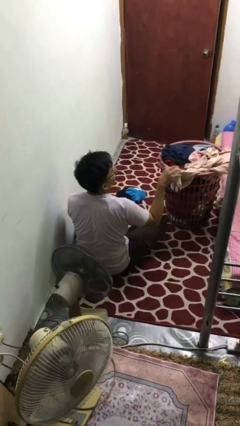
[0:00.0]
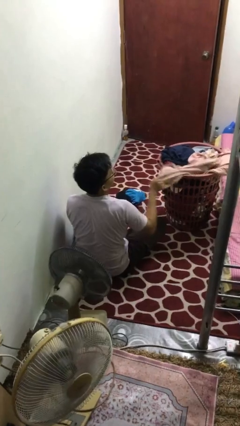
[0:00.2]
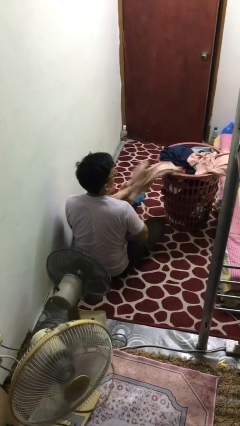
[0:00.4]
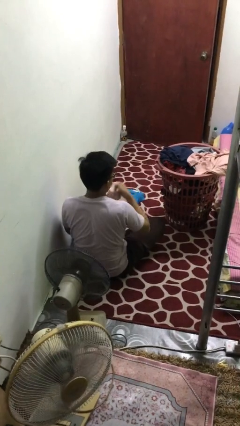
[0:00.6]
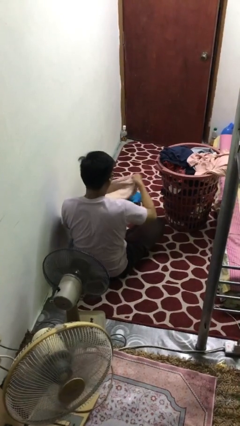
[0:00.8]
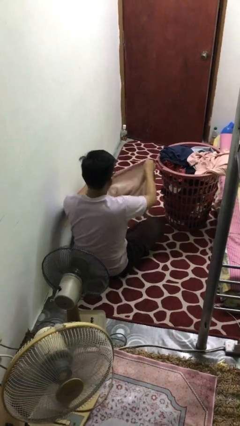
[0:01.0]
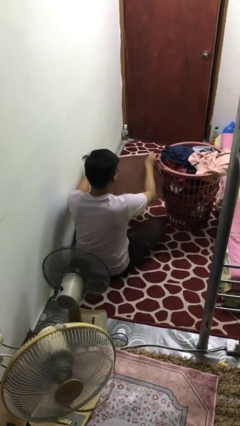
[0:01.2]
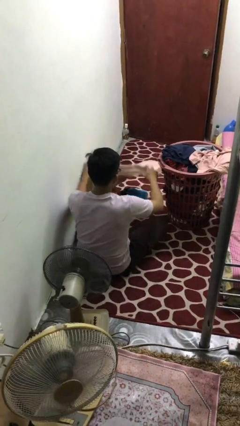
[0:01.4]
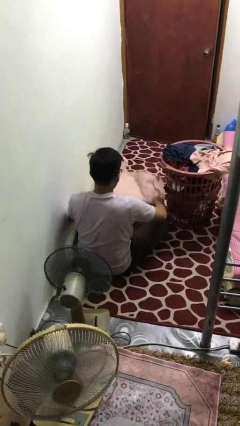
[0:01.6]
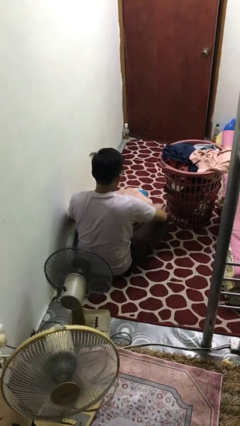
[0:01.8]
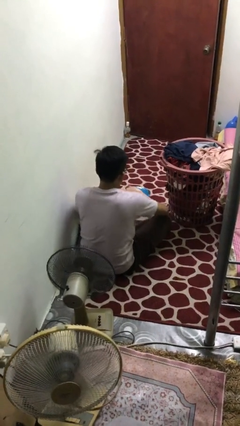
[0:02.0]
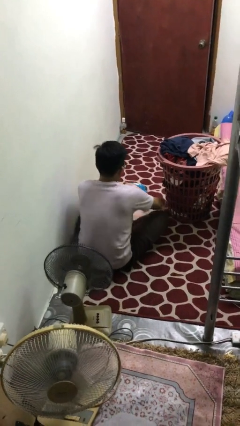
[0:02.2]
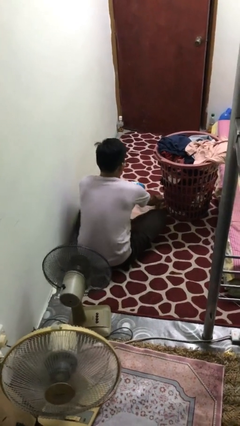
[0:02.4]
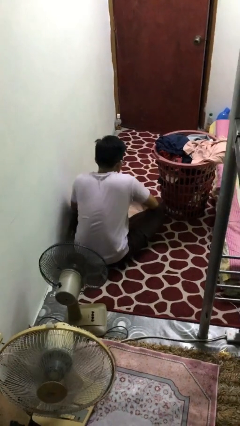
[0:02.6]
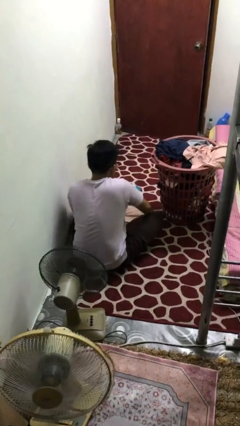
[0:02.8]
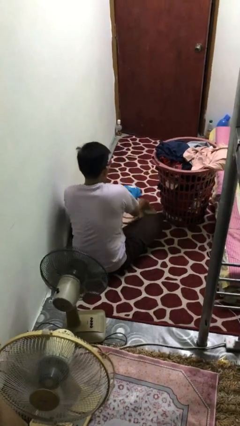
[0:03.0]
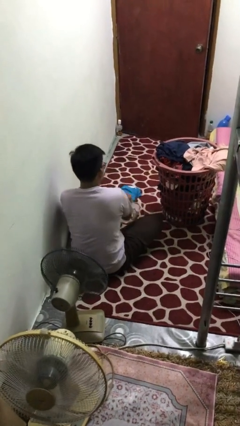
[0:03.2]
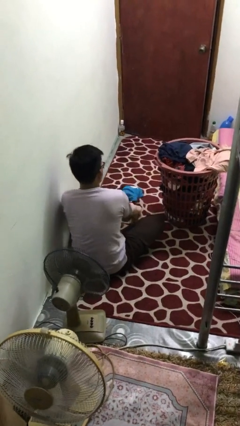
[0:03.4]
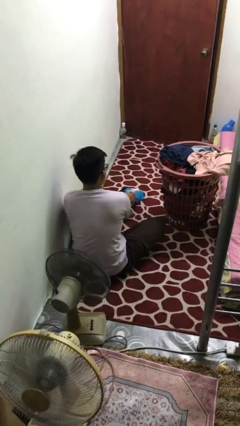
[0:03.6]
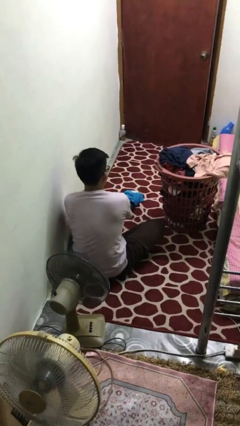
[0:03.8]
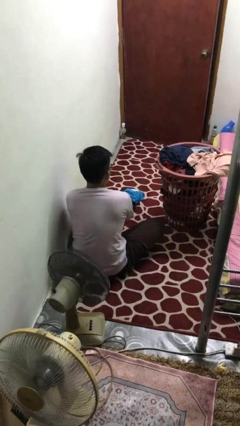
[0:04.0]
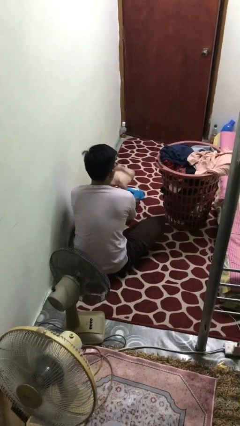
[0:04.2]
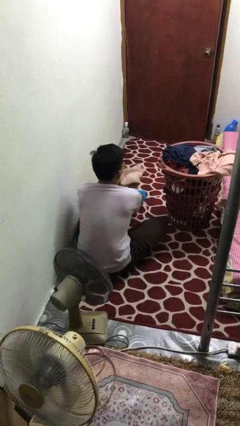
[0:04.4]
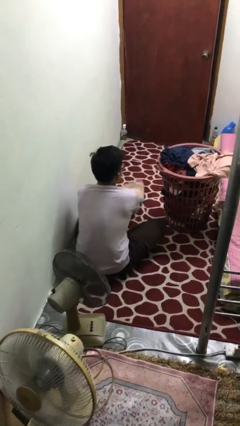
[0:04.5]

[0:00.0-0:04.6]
person folds shirt

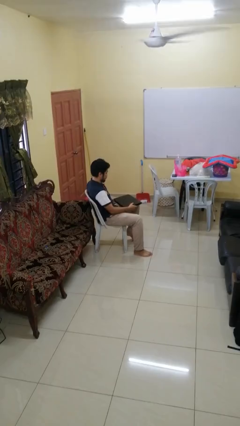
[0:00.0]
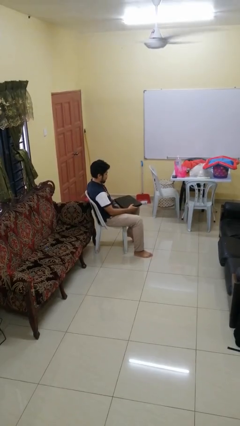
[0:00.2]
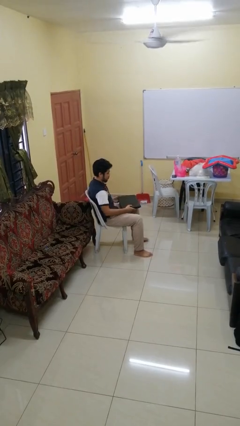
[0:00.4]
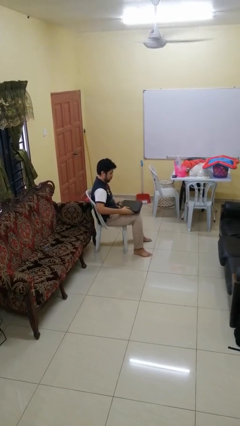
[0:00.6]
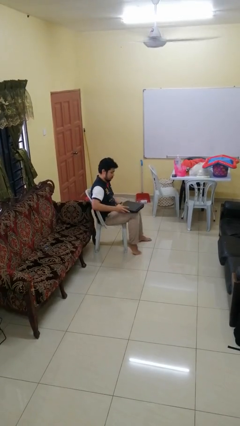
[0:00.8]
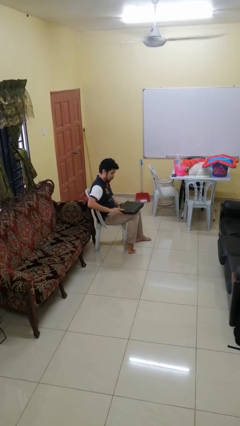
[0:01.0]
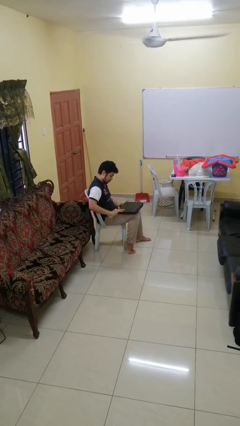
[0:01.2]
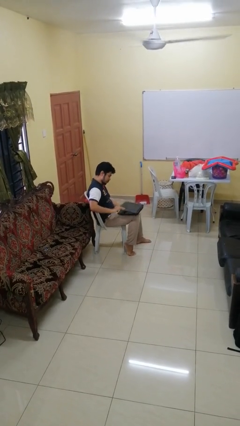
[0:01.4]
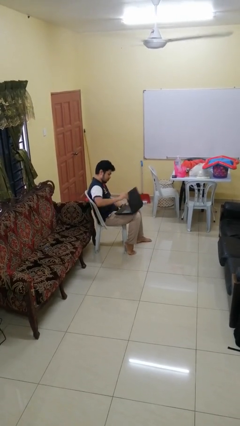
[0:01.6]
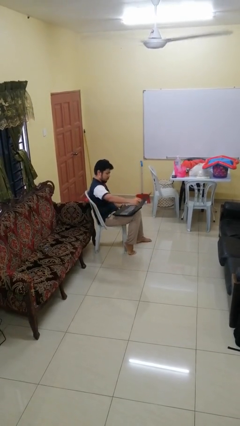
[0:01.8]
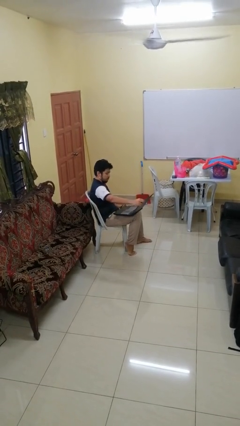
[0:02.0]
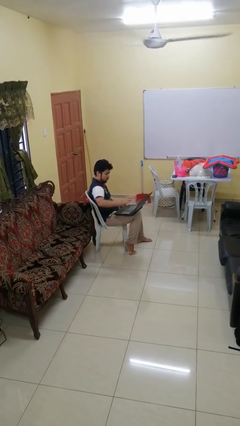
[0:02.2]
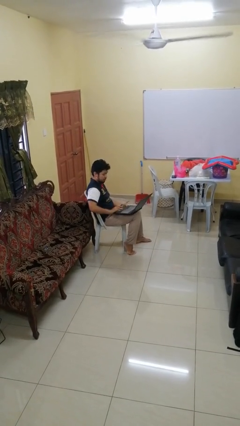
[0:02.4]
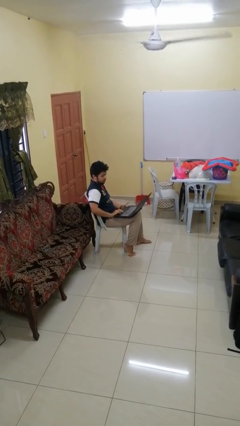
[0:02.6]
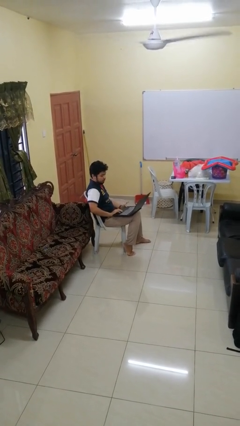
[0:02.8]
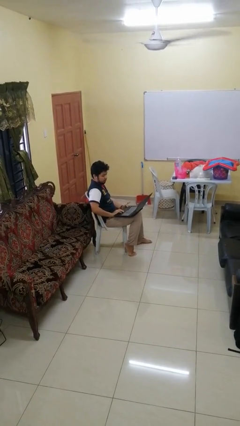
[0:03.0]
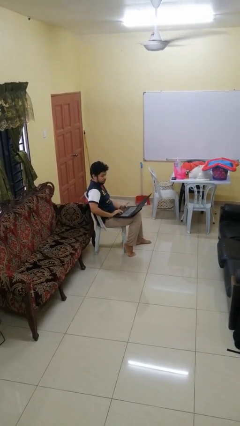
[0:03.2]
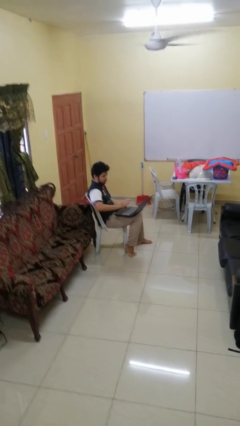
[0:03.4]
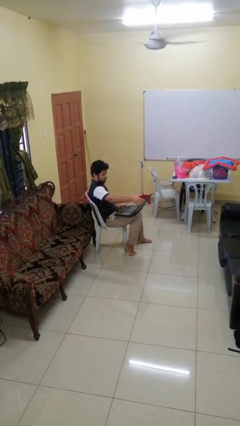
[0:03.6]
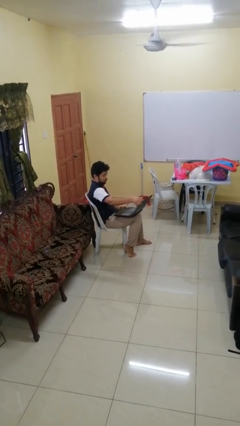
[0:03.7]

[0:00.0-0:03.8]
person opens laptop

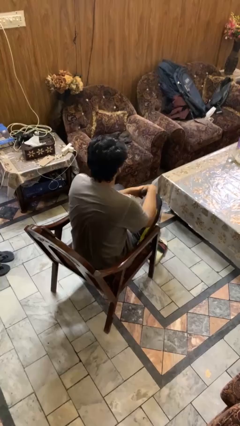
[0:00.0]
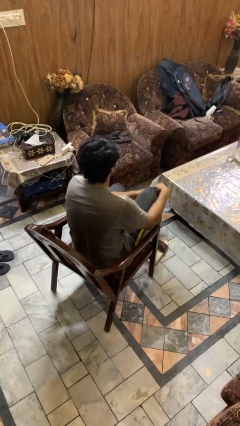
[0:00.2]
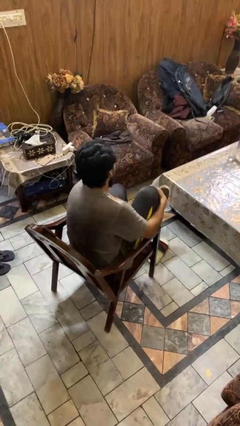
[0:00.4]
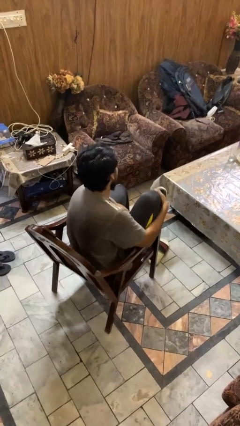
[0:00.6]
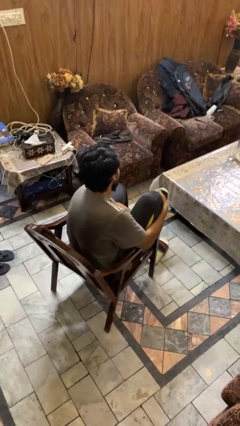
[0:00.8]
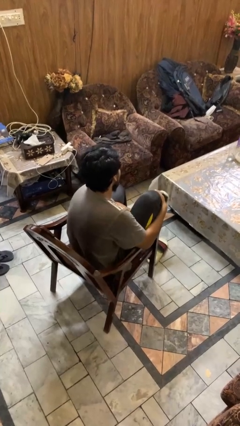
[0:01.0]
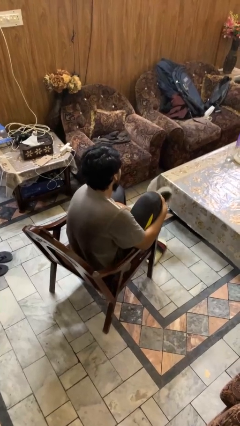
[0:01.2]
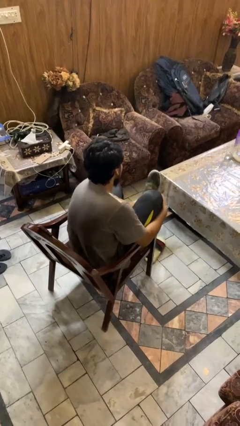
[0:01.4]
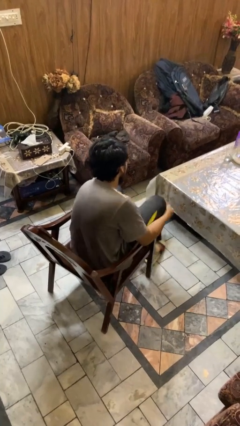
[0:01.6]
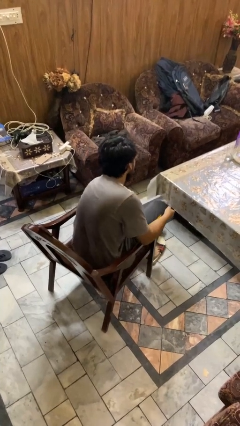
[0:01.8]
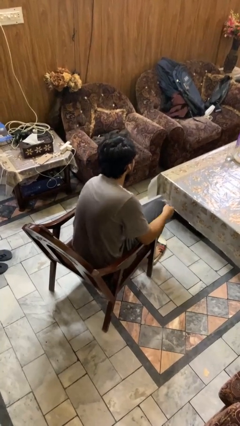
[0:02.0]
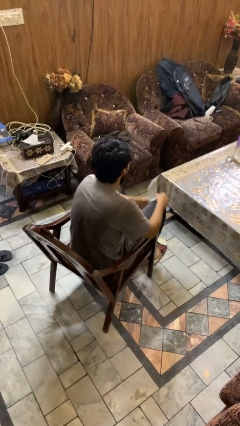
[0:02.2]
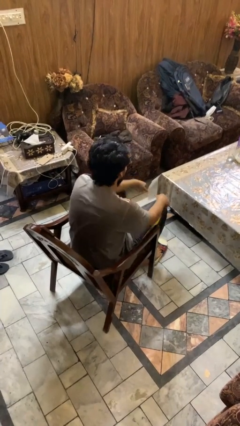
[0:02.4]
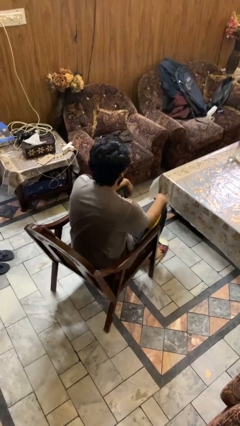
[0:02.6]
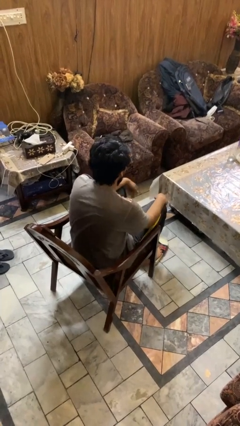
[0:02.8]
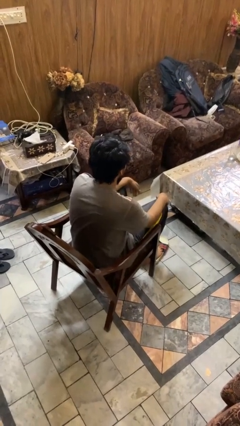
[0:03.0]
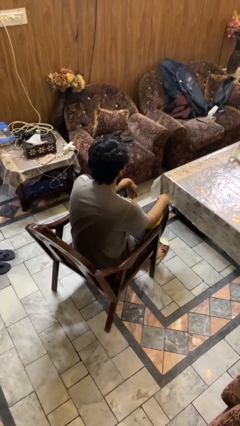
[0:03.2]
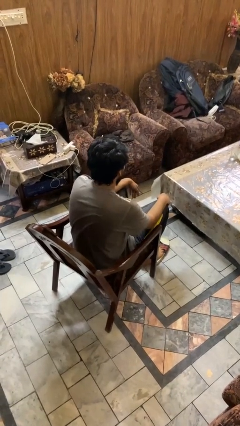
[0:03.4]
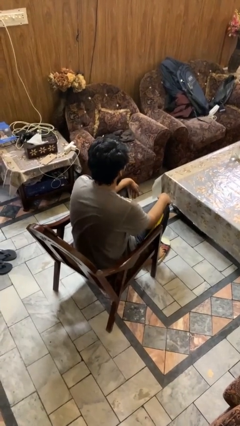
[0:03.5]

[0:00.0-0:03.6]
person takes off shoes

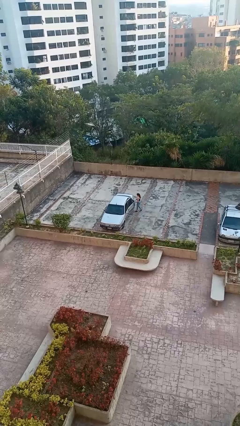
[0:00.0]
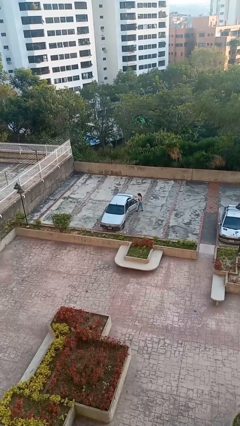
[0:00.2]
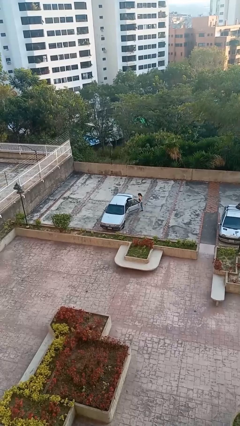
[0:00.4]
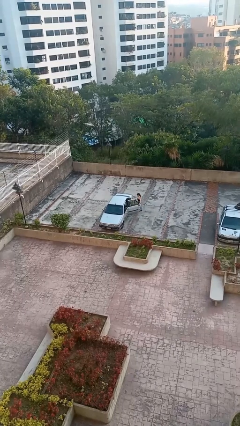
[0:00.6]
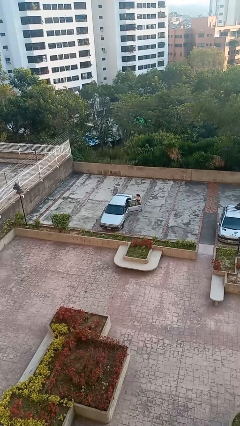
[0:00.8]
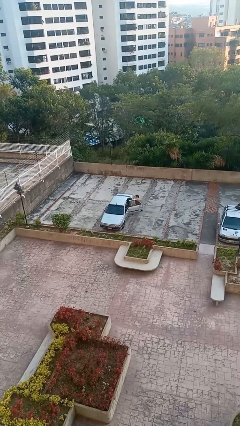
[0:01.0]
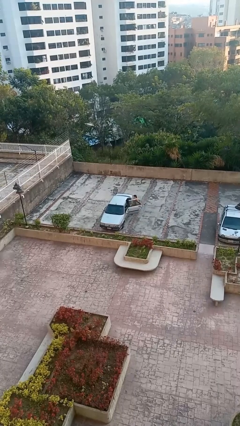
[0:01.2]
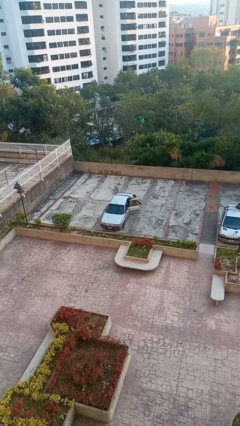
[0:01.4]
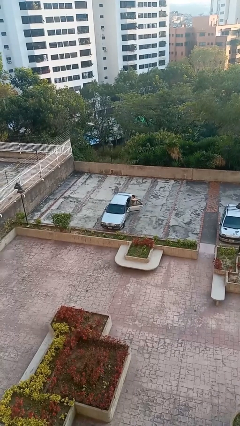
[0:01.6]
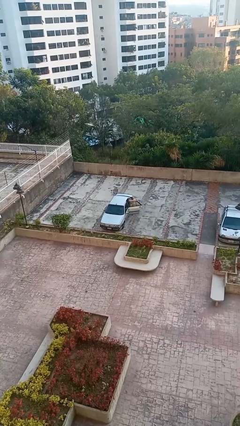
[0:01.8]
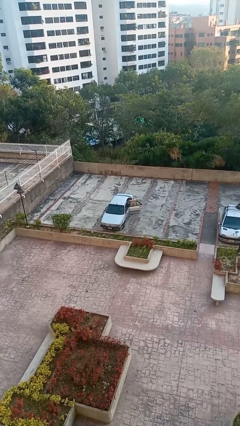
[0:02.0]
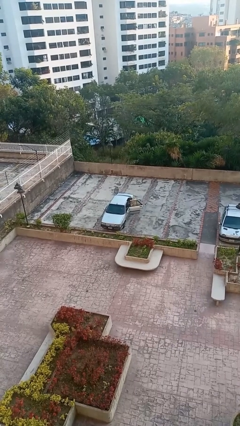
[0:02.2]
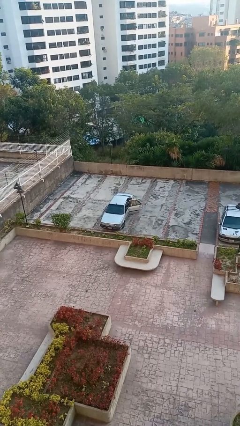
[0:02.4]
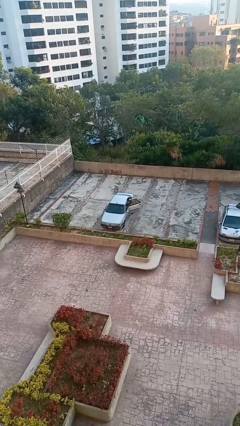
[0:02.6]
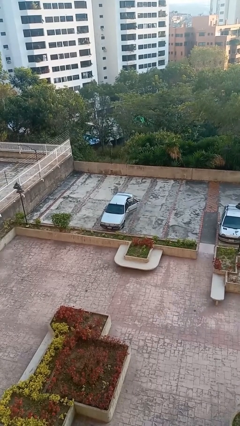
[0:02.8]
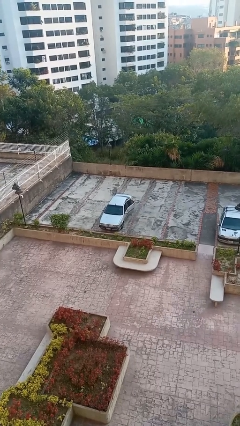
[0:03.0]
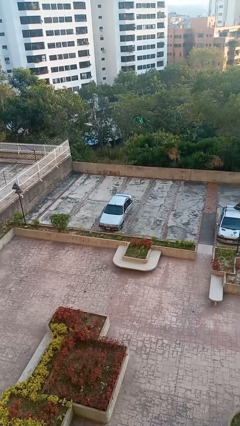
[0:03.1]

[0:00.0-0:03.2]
car picks up person

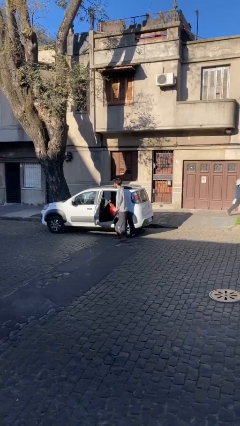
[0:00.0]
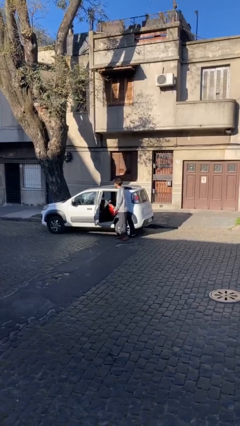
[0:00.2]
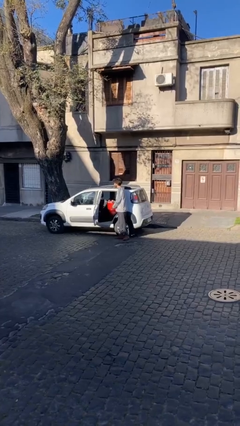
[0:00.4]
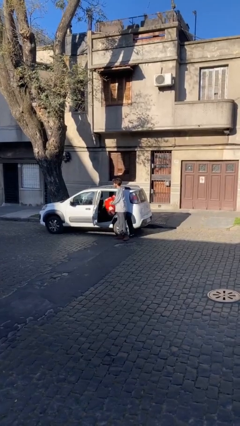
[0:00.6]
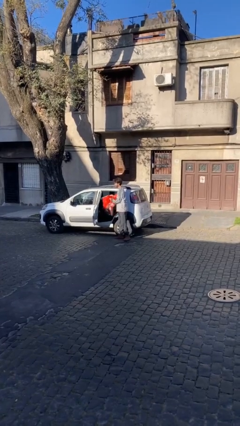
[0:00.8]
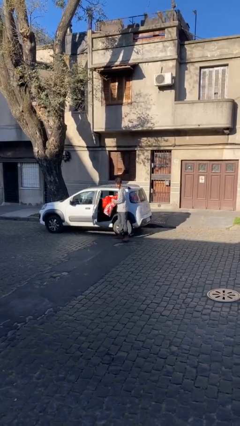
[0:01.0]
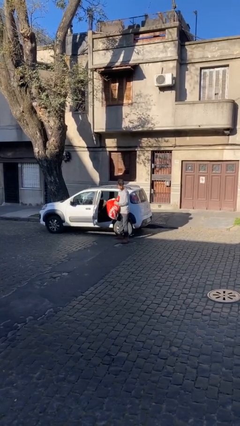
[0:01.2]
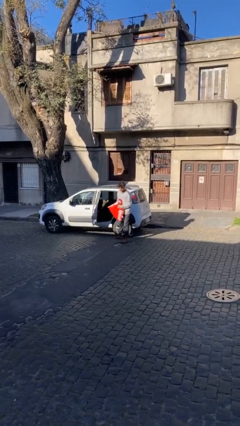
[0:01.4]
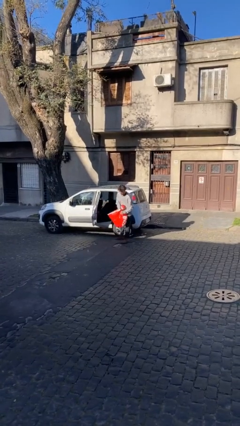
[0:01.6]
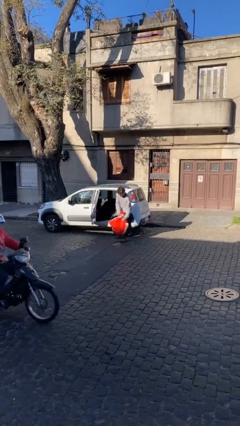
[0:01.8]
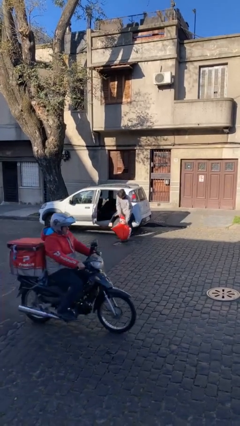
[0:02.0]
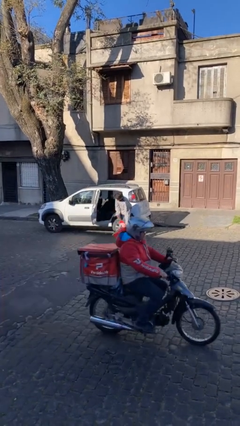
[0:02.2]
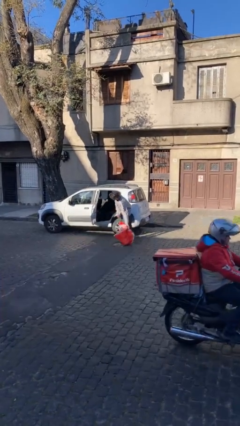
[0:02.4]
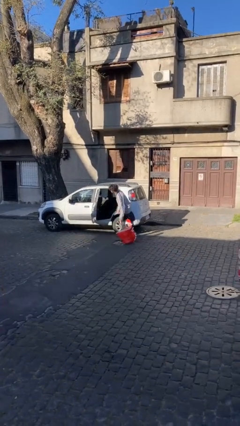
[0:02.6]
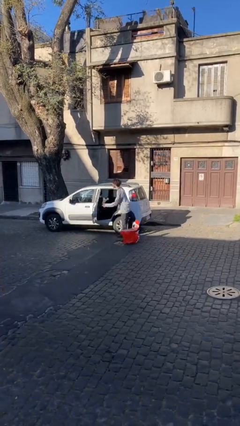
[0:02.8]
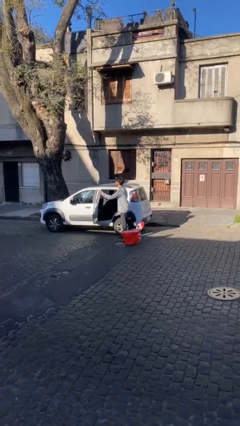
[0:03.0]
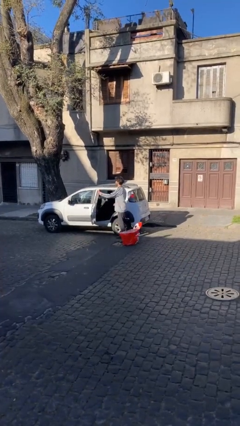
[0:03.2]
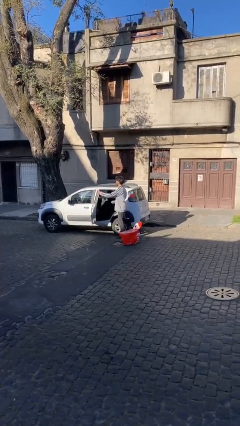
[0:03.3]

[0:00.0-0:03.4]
person unloads car
